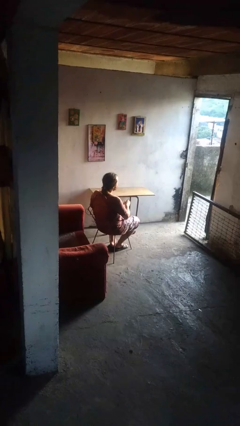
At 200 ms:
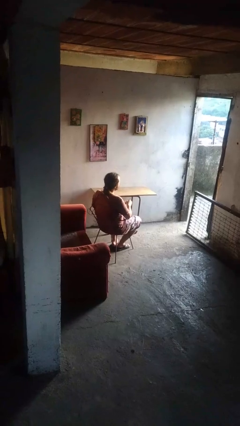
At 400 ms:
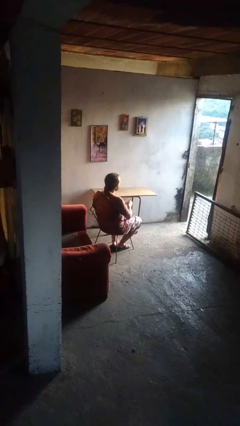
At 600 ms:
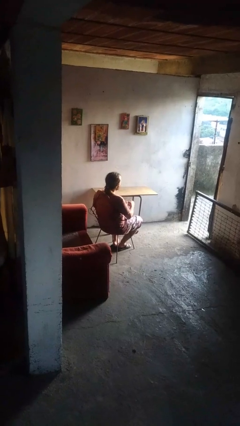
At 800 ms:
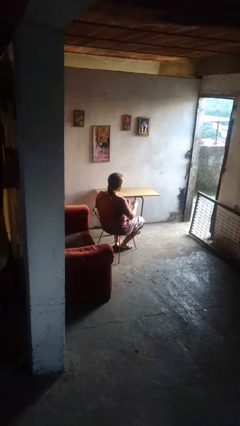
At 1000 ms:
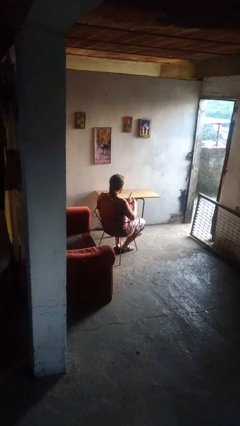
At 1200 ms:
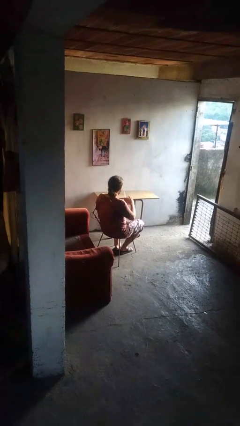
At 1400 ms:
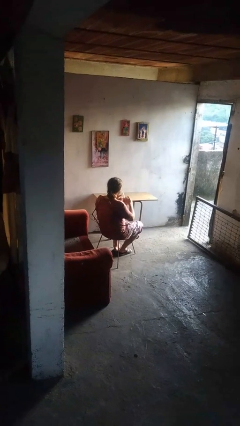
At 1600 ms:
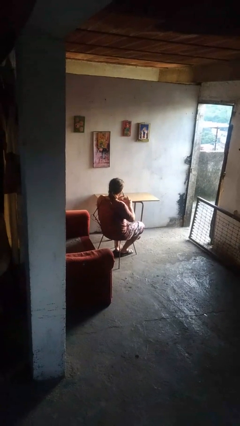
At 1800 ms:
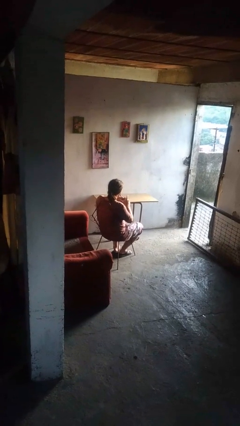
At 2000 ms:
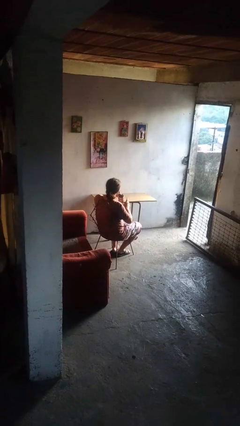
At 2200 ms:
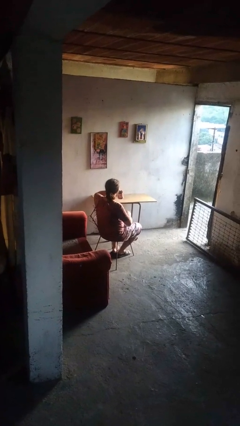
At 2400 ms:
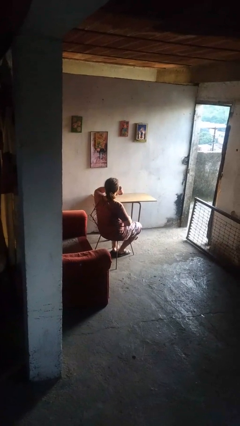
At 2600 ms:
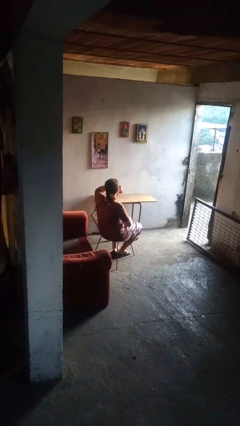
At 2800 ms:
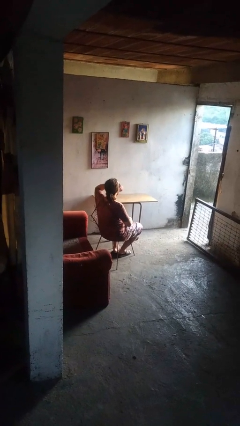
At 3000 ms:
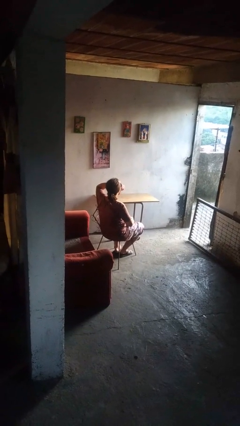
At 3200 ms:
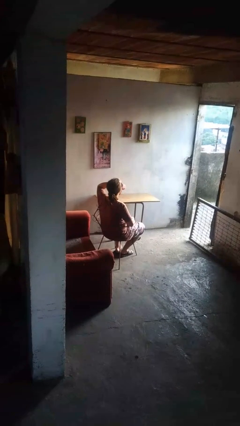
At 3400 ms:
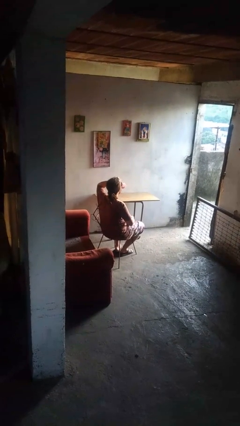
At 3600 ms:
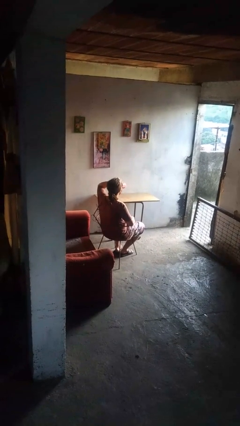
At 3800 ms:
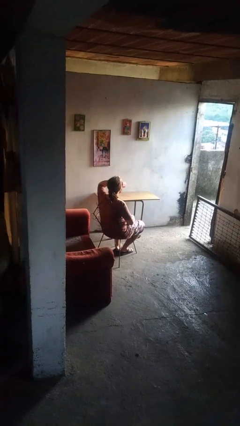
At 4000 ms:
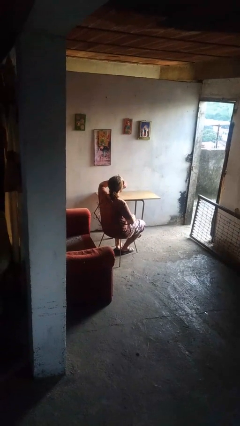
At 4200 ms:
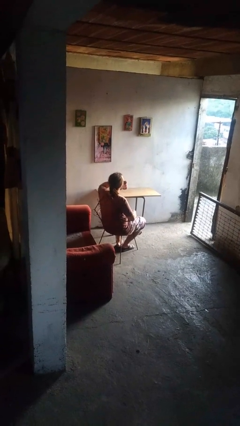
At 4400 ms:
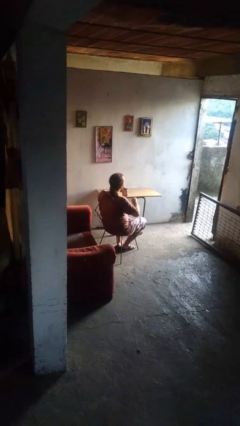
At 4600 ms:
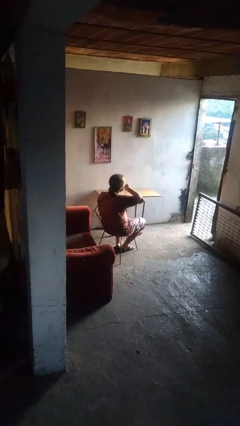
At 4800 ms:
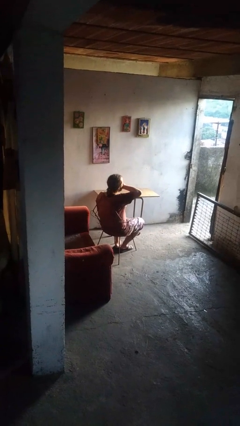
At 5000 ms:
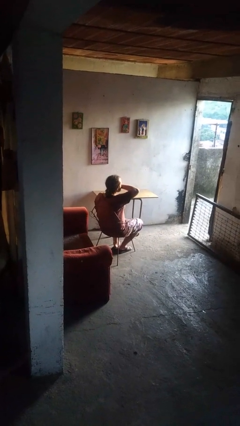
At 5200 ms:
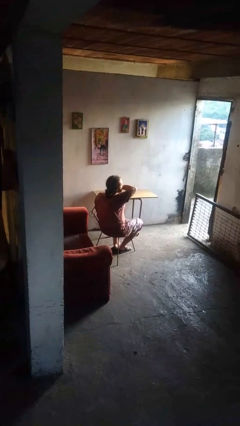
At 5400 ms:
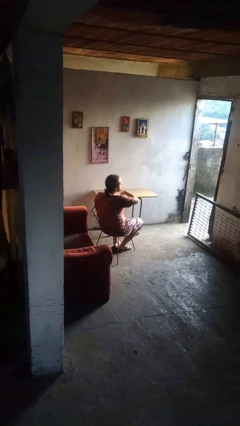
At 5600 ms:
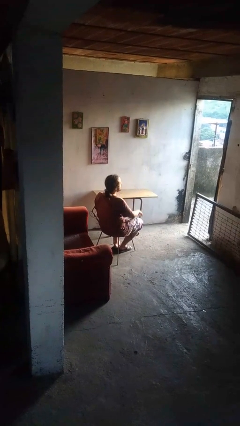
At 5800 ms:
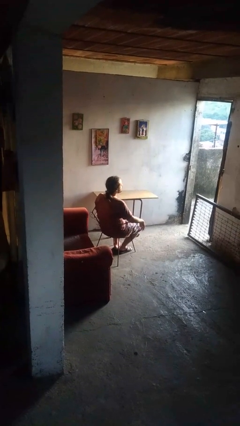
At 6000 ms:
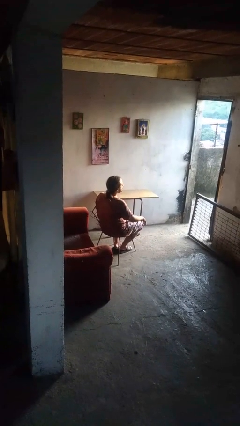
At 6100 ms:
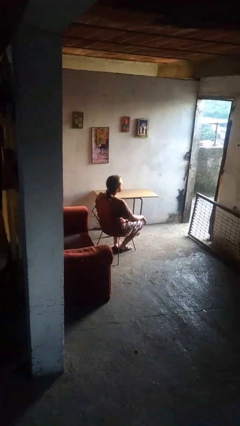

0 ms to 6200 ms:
person drinks from mug

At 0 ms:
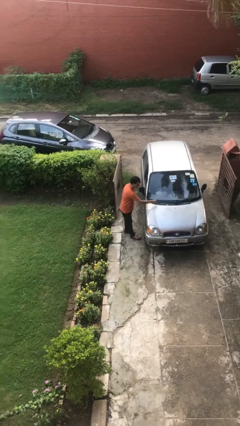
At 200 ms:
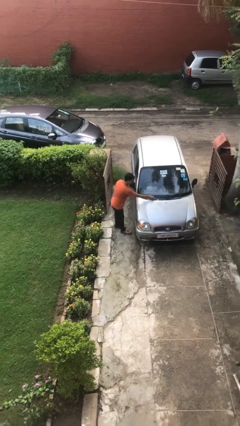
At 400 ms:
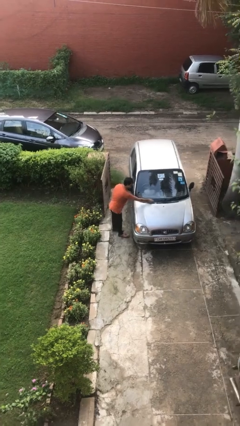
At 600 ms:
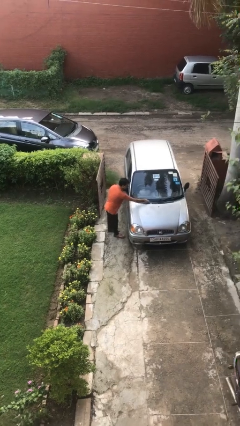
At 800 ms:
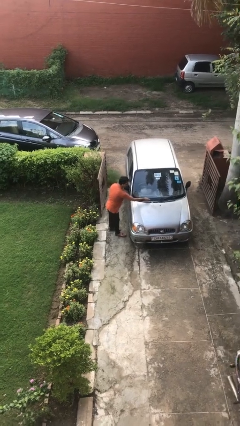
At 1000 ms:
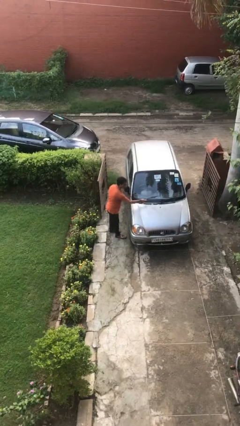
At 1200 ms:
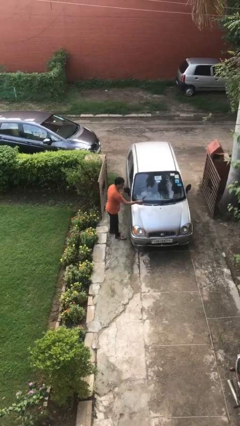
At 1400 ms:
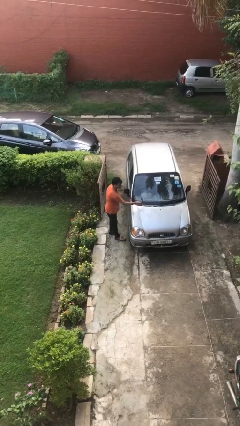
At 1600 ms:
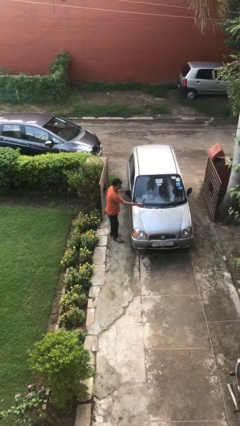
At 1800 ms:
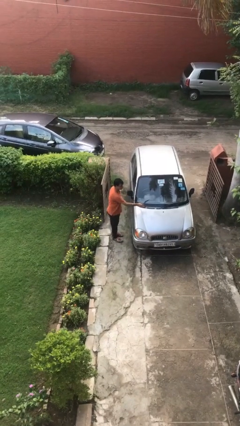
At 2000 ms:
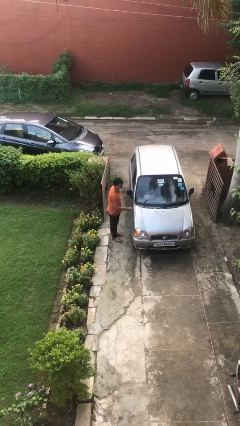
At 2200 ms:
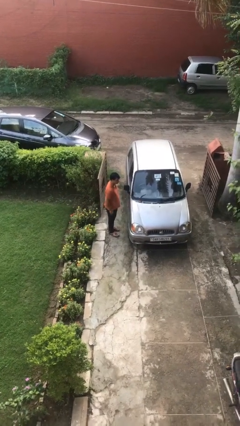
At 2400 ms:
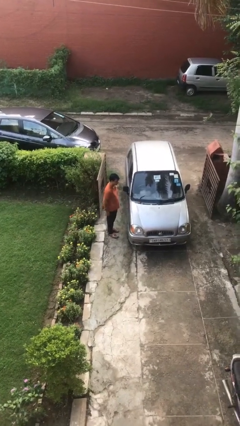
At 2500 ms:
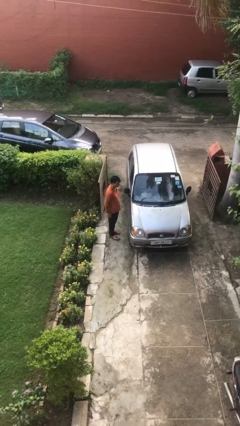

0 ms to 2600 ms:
person flips up car wipers

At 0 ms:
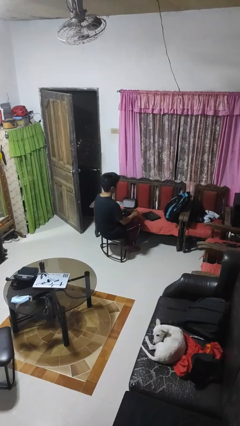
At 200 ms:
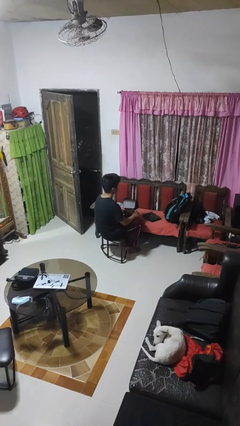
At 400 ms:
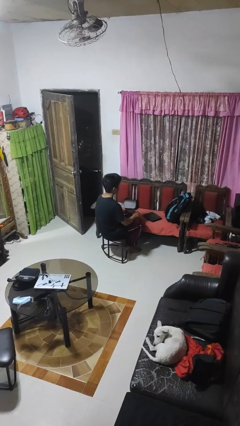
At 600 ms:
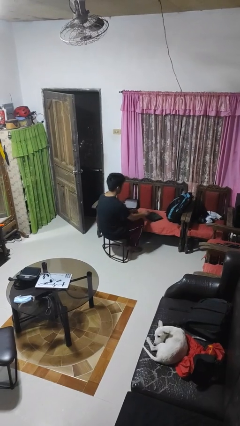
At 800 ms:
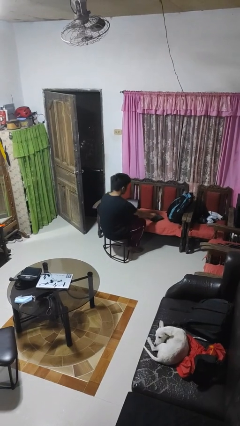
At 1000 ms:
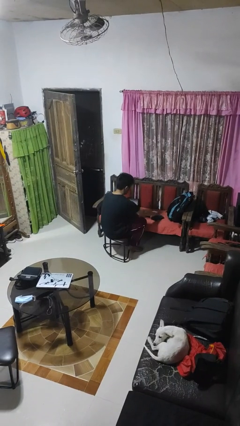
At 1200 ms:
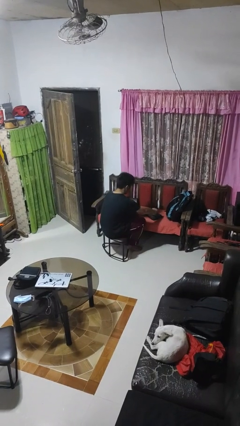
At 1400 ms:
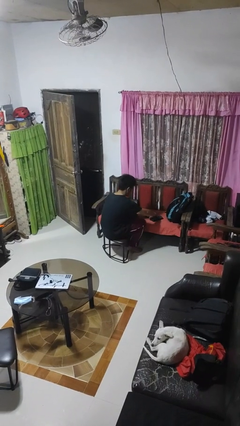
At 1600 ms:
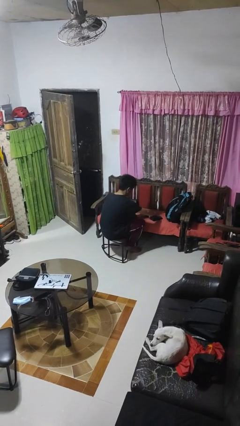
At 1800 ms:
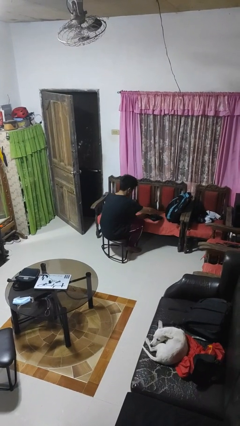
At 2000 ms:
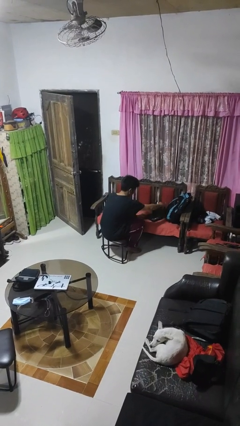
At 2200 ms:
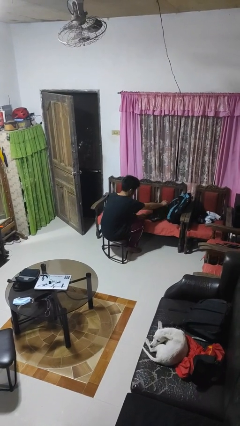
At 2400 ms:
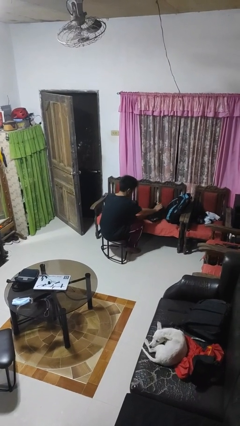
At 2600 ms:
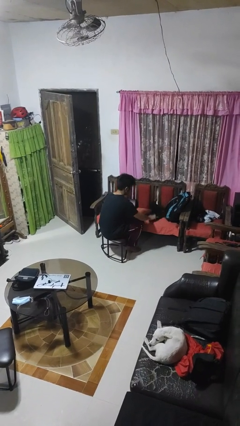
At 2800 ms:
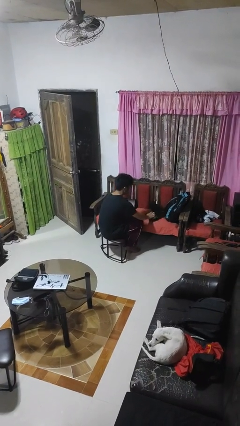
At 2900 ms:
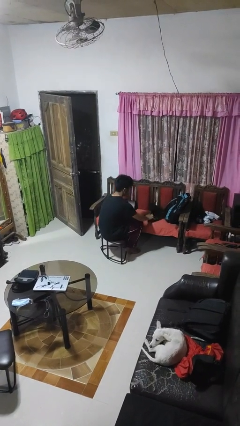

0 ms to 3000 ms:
person opens laptop

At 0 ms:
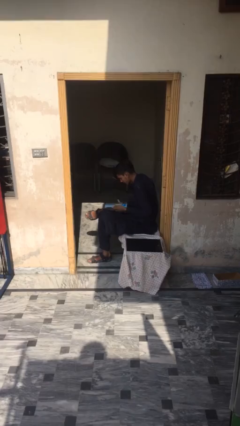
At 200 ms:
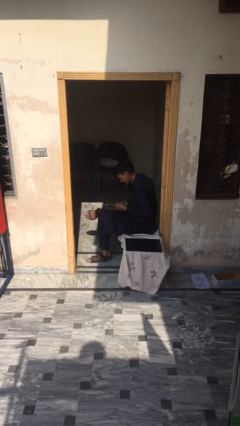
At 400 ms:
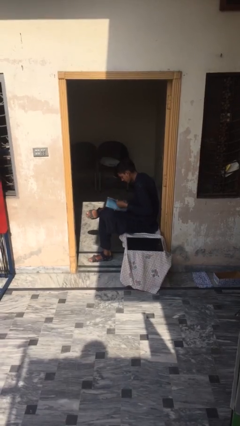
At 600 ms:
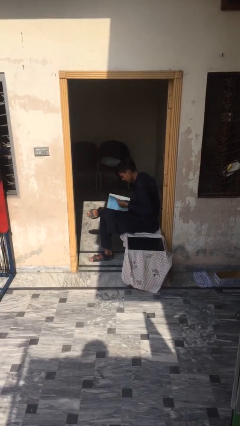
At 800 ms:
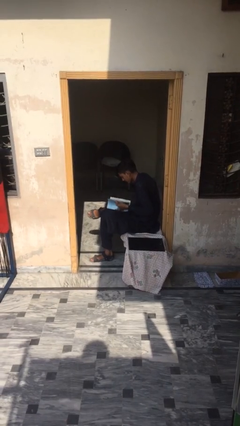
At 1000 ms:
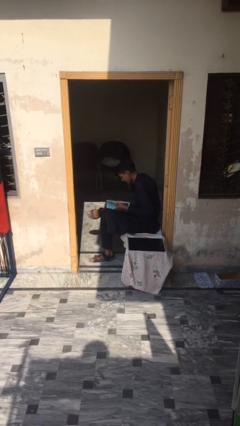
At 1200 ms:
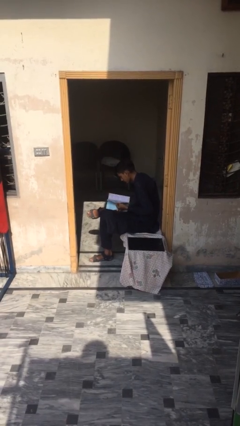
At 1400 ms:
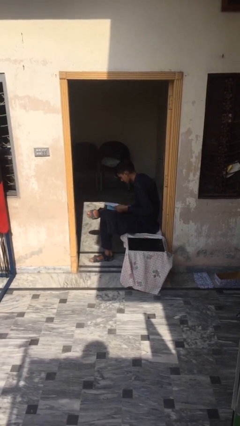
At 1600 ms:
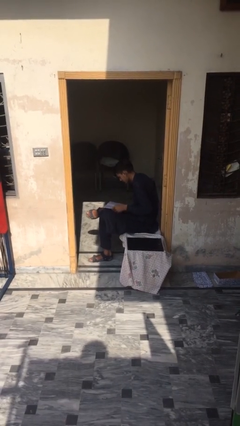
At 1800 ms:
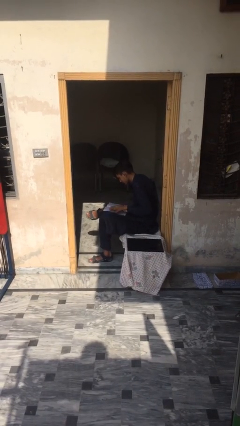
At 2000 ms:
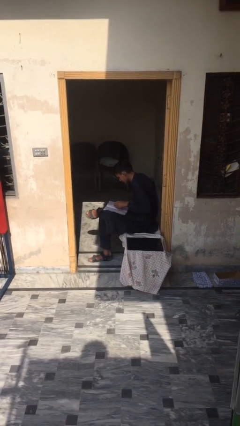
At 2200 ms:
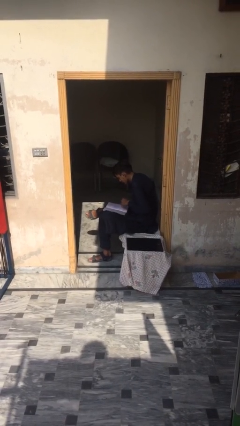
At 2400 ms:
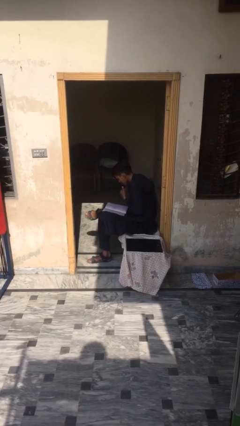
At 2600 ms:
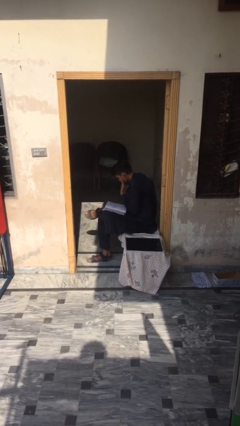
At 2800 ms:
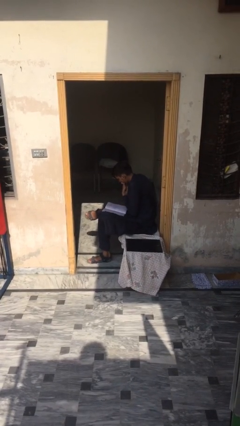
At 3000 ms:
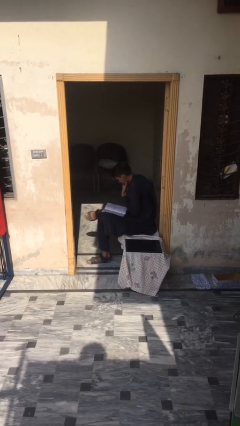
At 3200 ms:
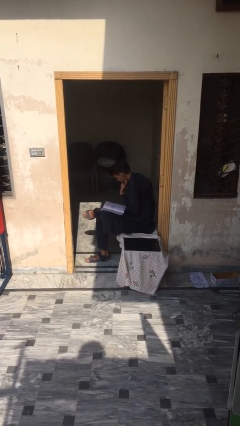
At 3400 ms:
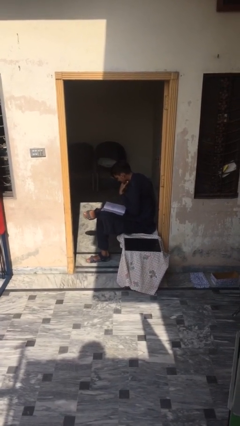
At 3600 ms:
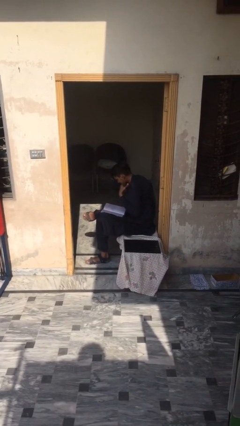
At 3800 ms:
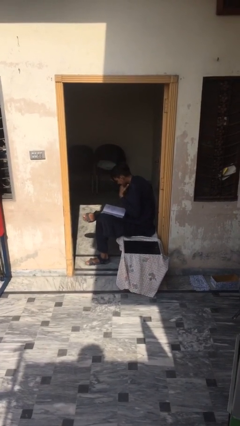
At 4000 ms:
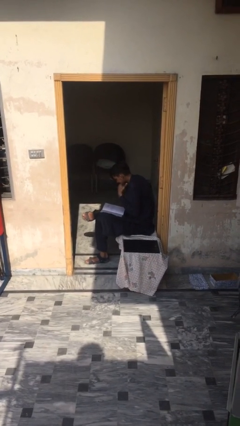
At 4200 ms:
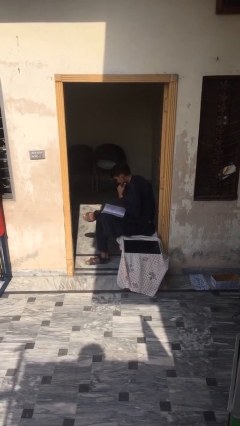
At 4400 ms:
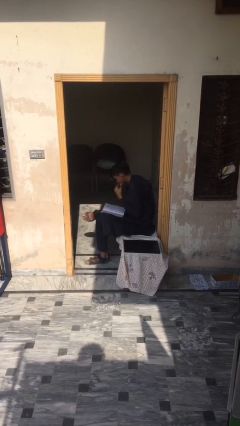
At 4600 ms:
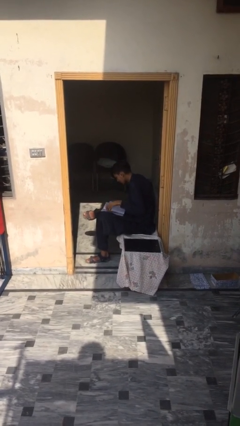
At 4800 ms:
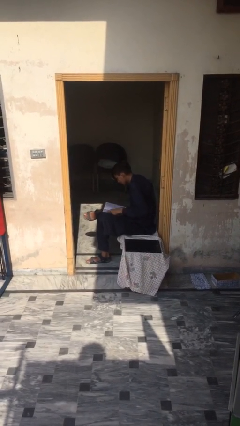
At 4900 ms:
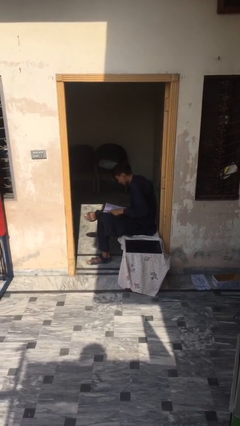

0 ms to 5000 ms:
person reads document

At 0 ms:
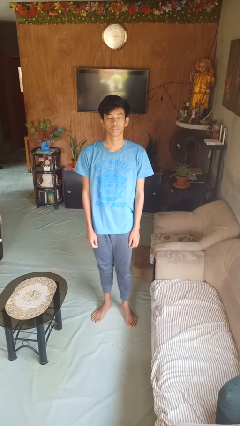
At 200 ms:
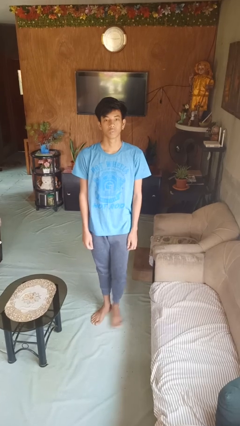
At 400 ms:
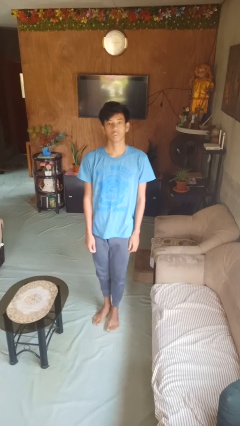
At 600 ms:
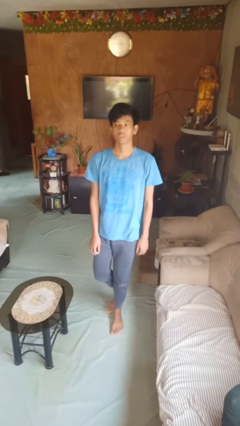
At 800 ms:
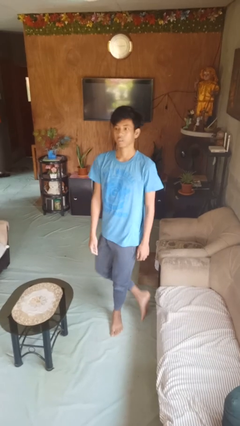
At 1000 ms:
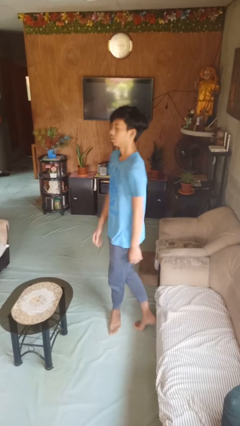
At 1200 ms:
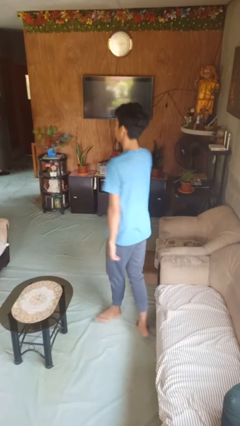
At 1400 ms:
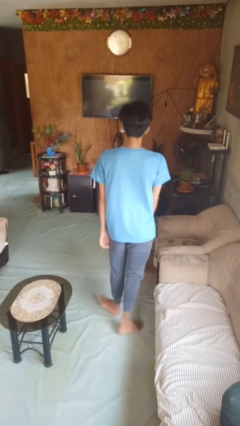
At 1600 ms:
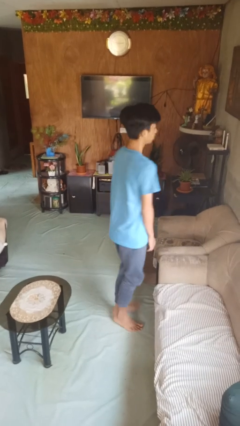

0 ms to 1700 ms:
person twirls
